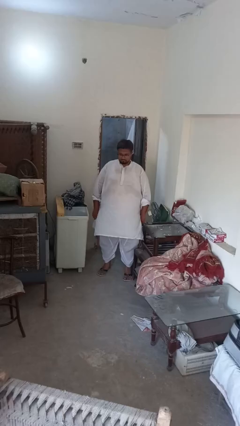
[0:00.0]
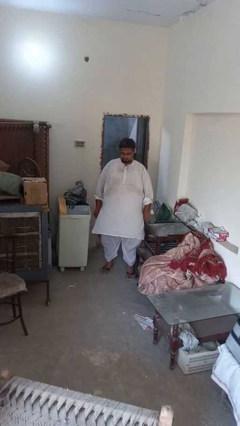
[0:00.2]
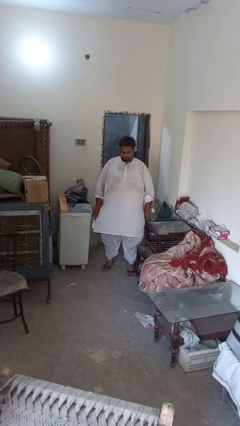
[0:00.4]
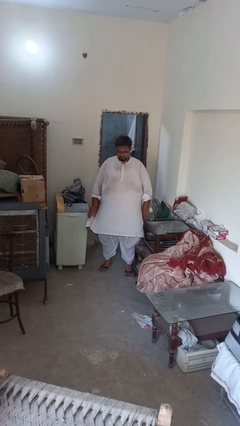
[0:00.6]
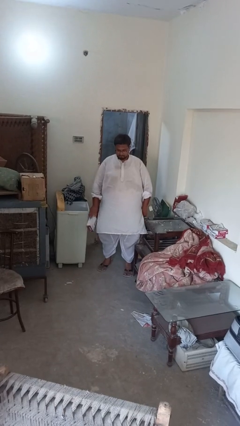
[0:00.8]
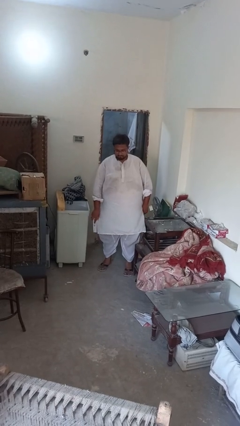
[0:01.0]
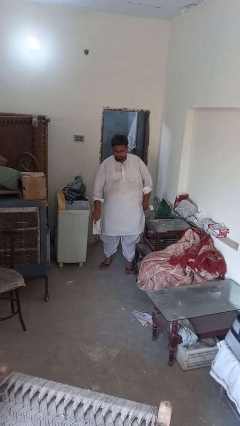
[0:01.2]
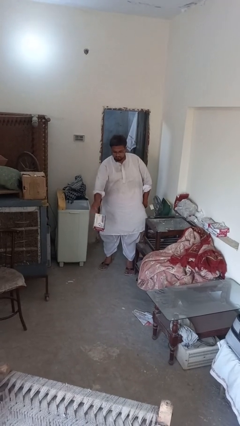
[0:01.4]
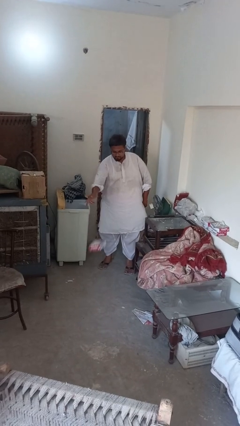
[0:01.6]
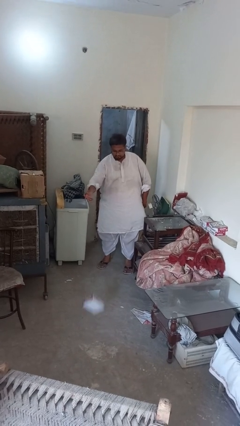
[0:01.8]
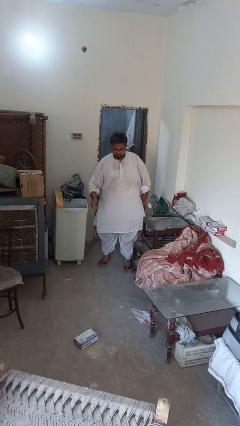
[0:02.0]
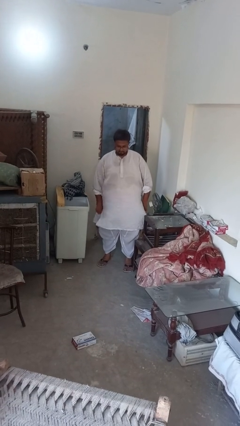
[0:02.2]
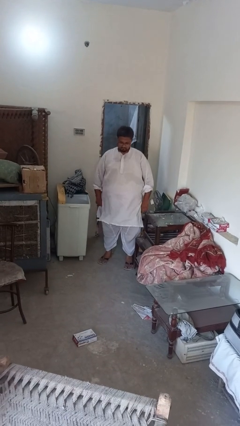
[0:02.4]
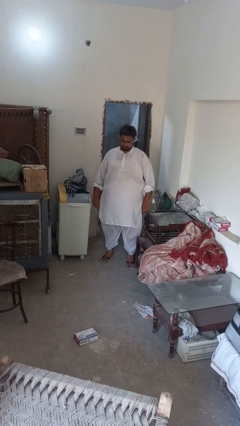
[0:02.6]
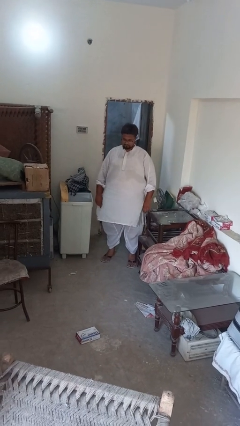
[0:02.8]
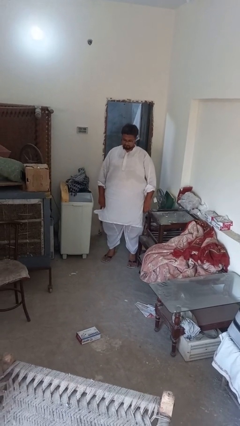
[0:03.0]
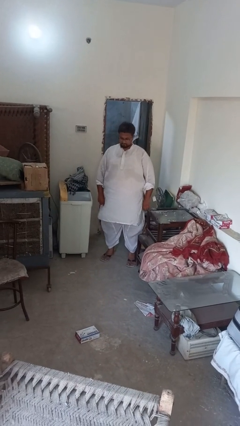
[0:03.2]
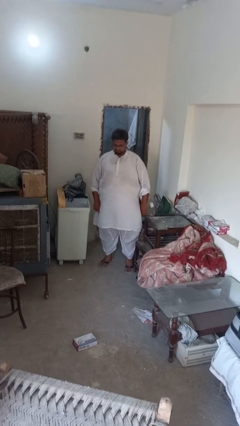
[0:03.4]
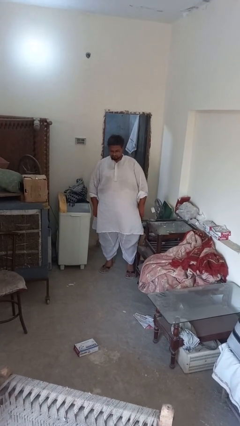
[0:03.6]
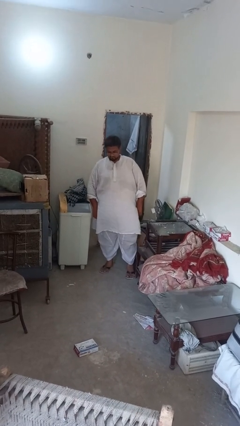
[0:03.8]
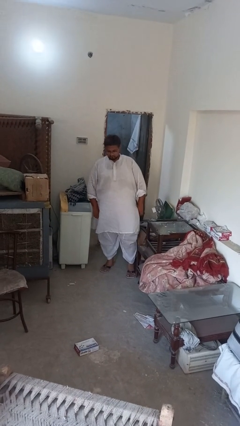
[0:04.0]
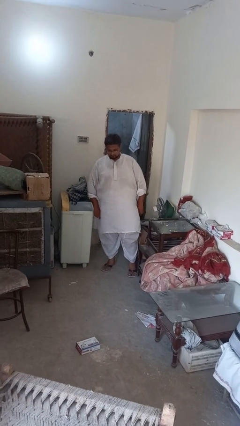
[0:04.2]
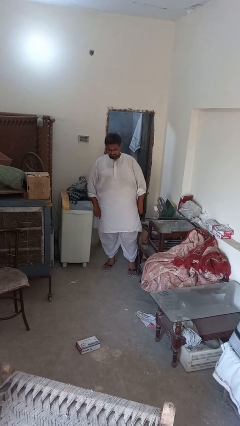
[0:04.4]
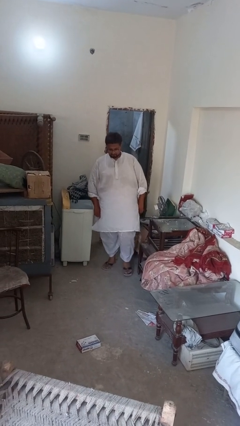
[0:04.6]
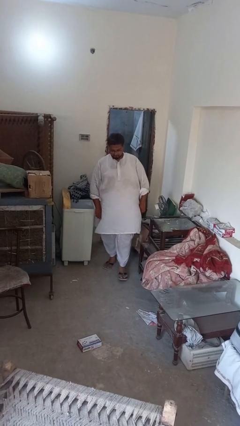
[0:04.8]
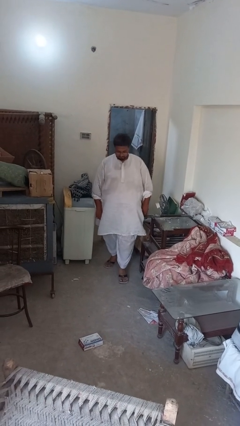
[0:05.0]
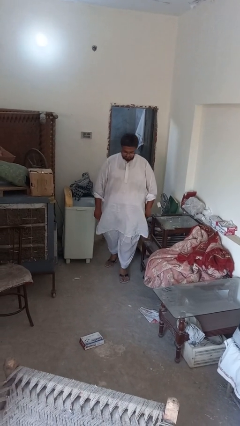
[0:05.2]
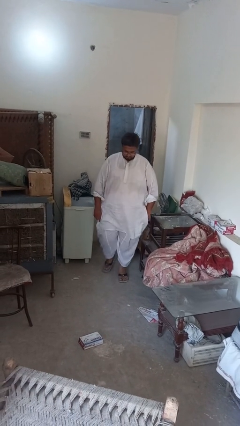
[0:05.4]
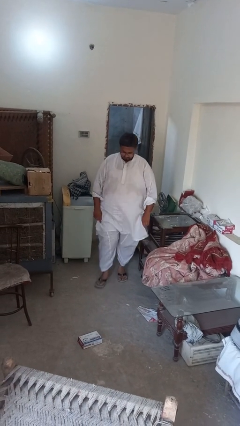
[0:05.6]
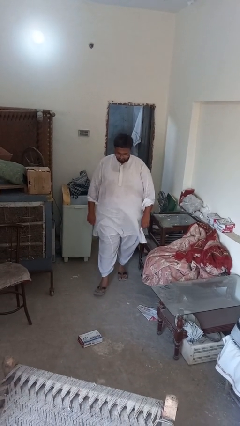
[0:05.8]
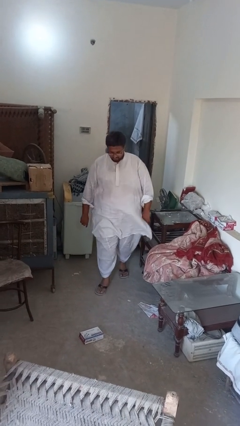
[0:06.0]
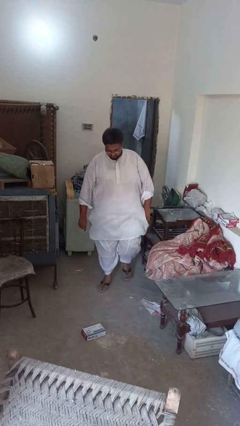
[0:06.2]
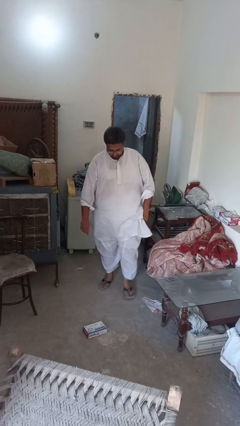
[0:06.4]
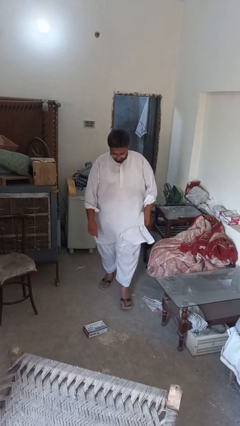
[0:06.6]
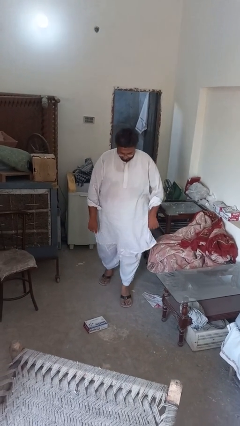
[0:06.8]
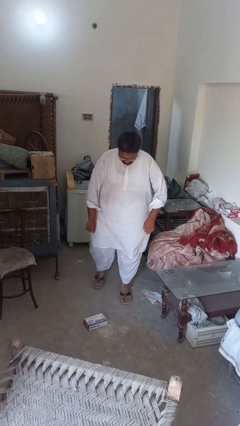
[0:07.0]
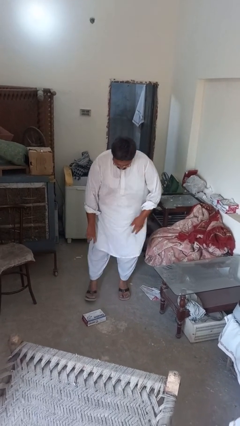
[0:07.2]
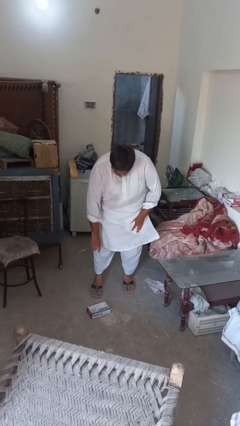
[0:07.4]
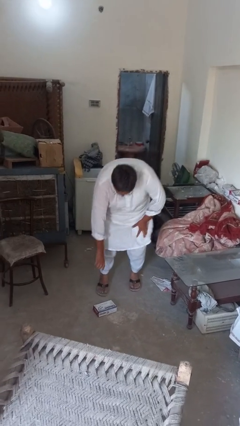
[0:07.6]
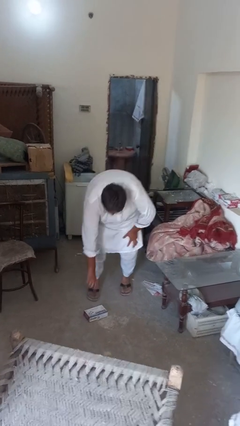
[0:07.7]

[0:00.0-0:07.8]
person throws object to ground

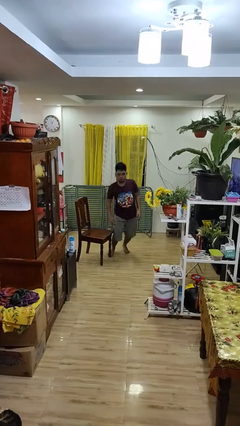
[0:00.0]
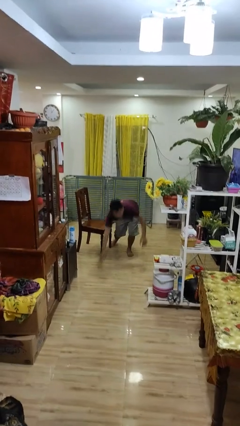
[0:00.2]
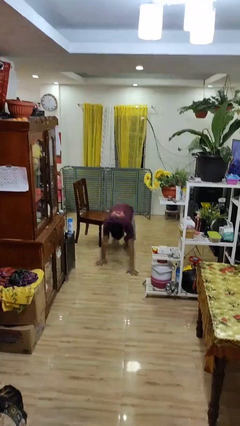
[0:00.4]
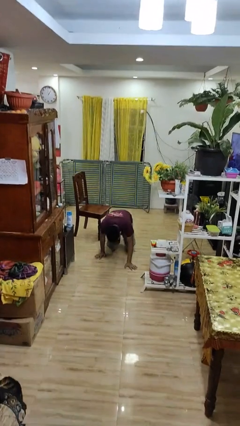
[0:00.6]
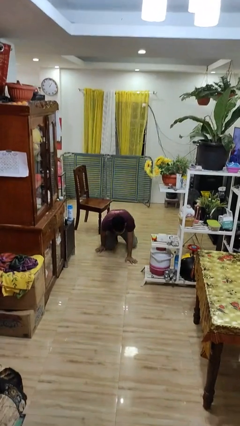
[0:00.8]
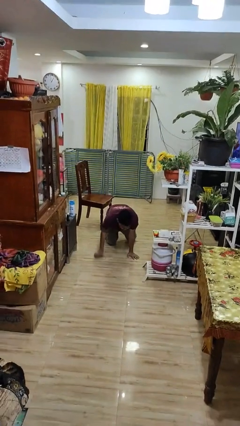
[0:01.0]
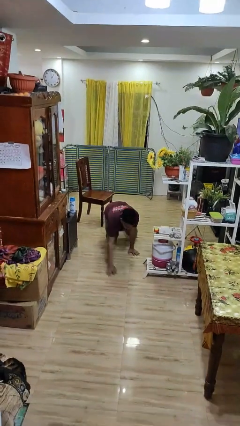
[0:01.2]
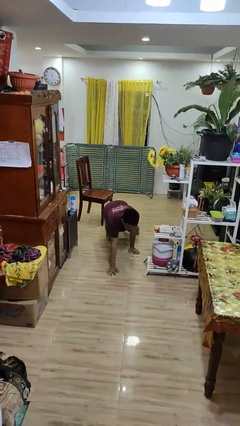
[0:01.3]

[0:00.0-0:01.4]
person trips on object on floor

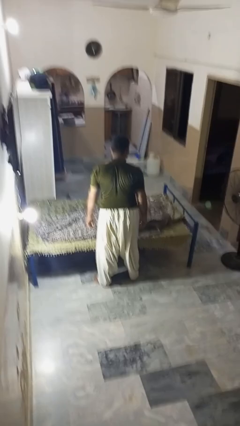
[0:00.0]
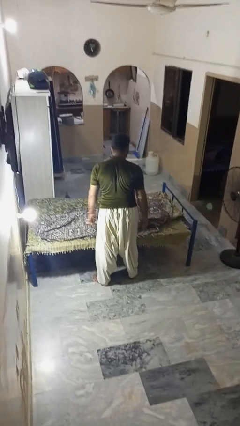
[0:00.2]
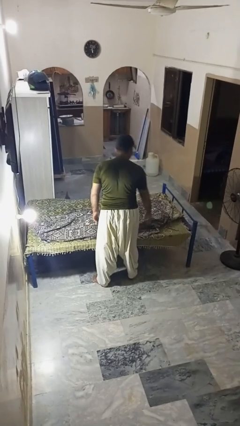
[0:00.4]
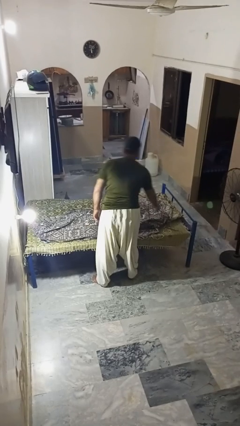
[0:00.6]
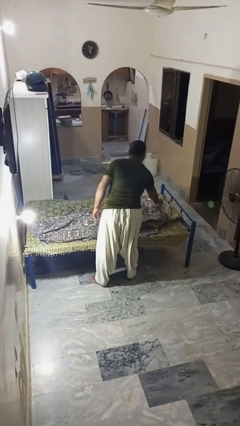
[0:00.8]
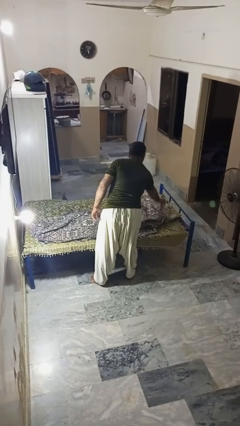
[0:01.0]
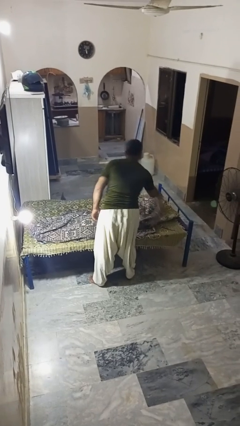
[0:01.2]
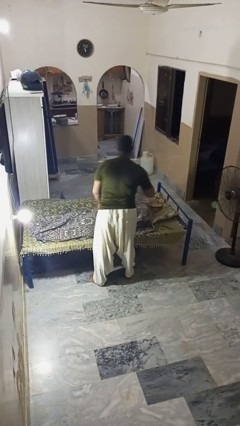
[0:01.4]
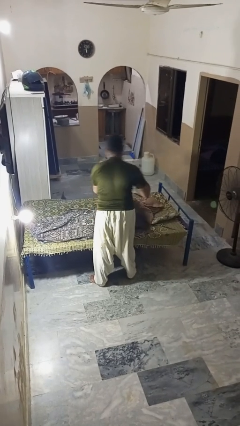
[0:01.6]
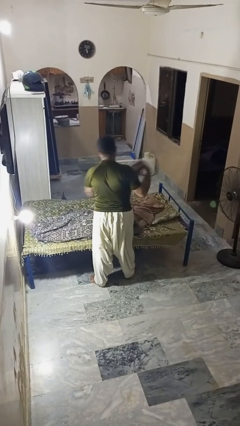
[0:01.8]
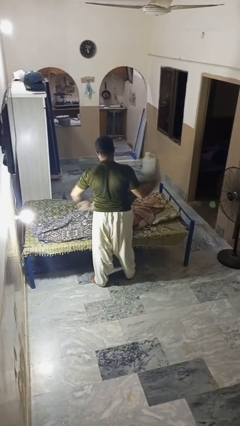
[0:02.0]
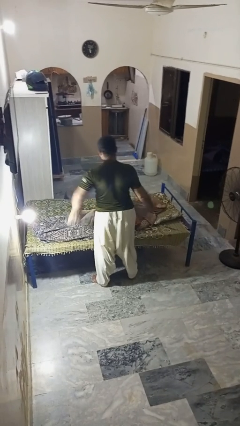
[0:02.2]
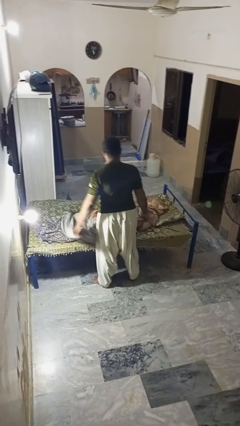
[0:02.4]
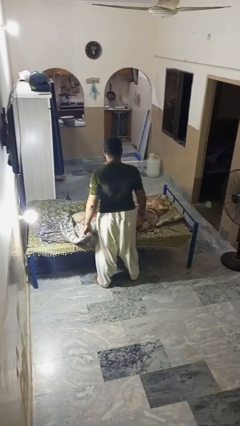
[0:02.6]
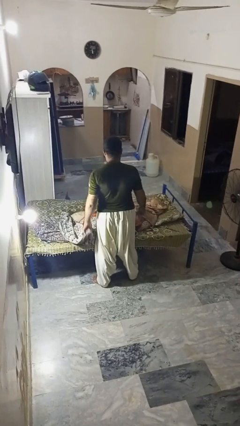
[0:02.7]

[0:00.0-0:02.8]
person uncovers friend with blanket

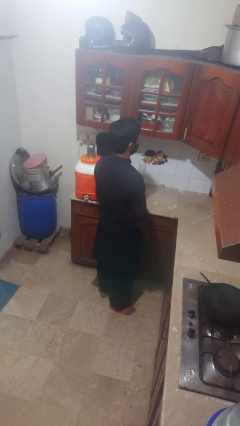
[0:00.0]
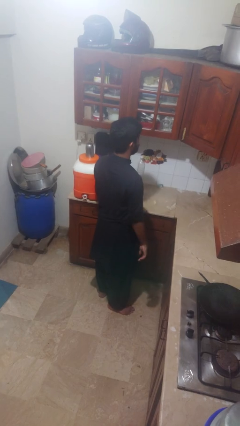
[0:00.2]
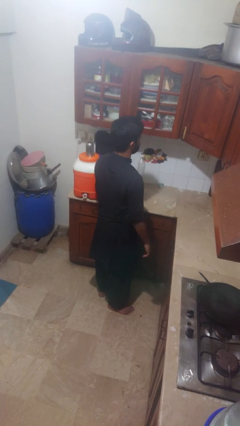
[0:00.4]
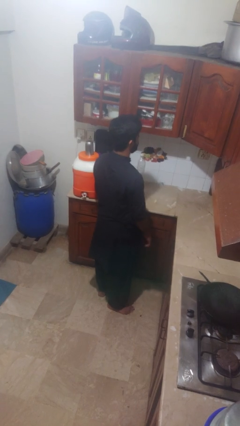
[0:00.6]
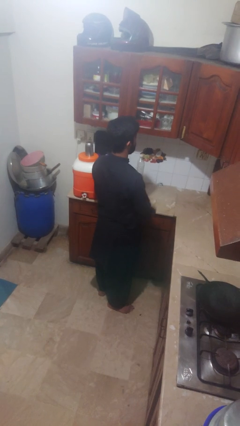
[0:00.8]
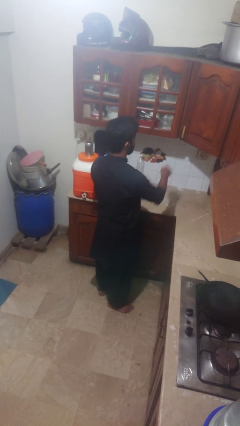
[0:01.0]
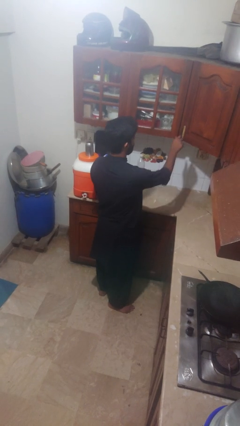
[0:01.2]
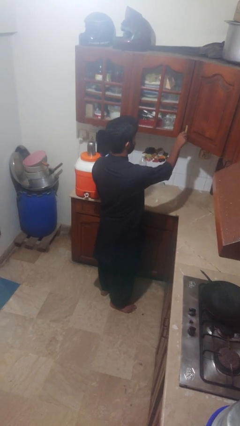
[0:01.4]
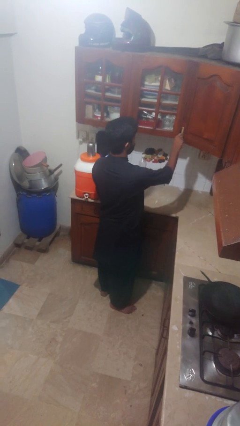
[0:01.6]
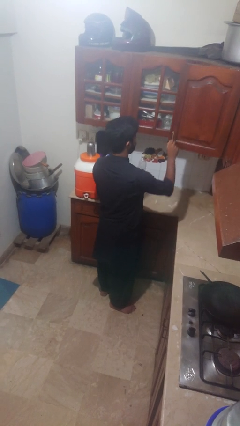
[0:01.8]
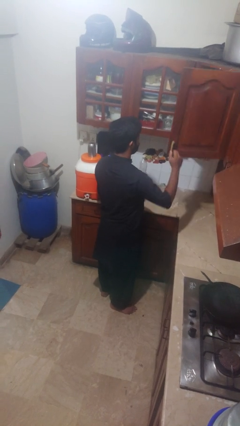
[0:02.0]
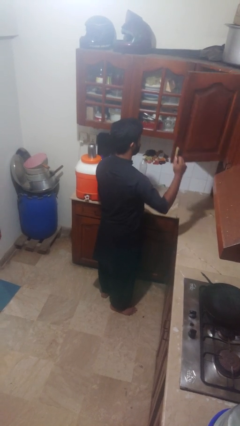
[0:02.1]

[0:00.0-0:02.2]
person opens cabinet

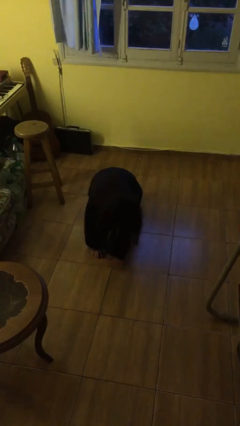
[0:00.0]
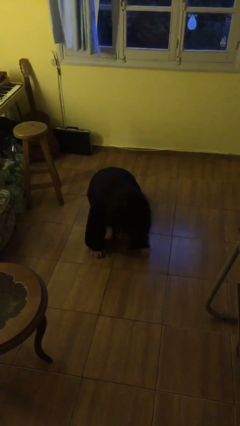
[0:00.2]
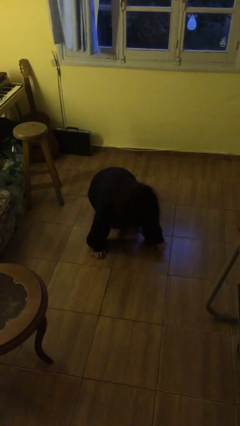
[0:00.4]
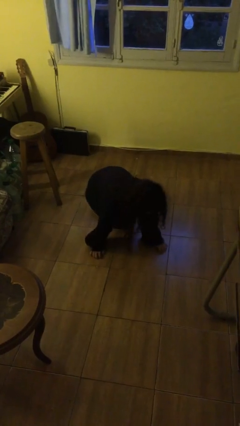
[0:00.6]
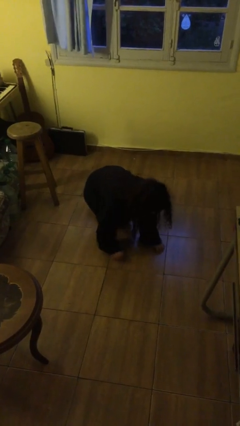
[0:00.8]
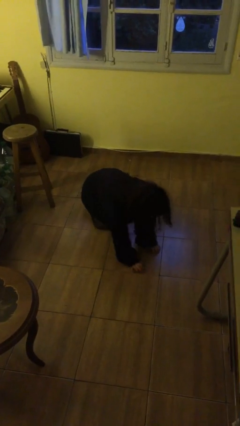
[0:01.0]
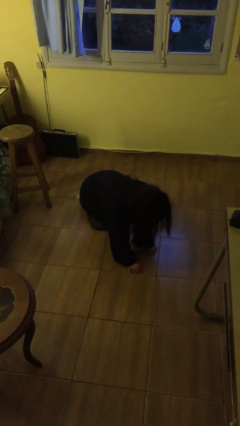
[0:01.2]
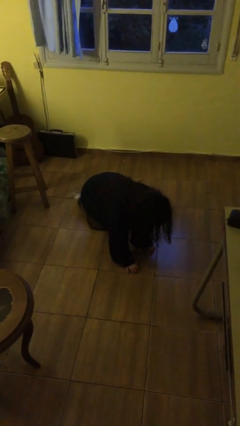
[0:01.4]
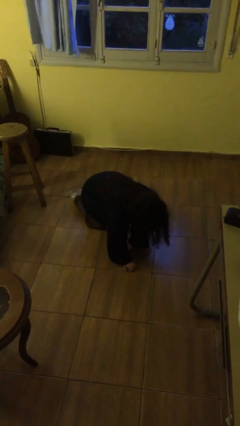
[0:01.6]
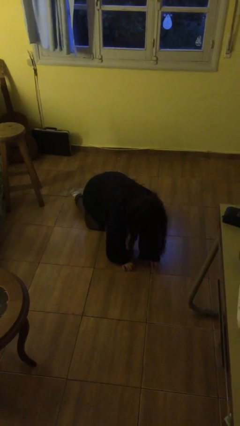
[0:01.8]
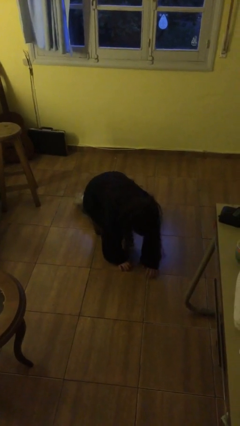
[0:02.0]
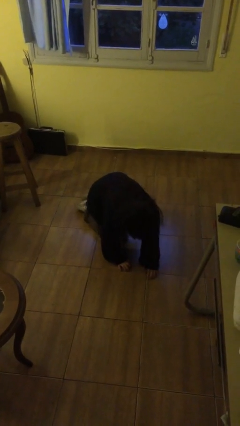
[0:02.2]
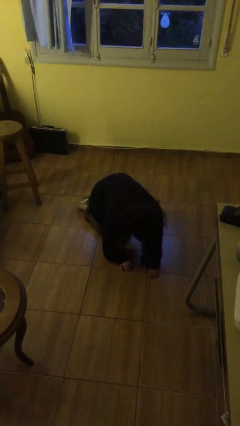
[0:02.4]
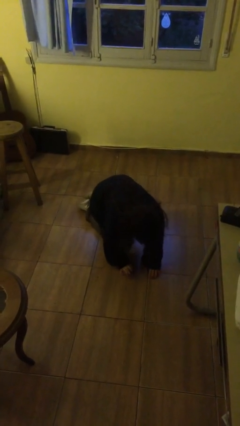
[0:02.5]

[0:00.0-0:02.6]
person crawls

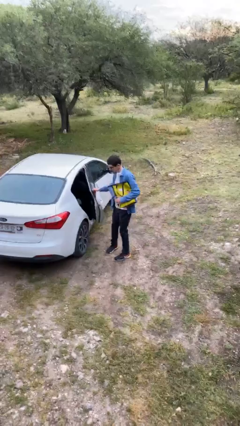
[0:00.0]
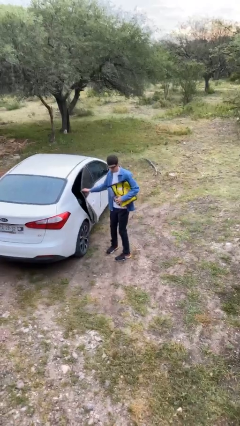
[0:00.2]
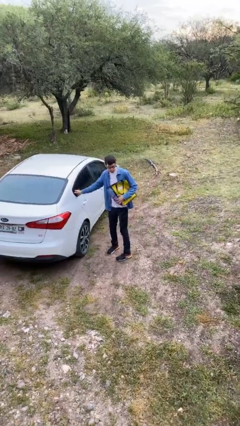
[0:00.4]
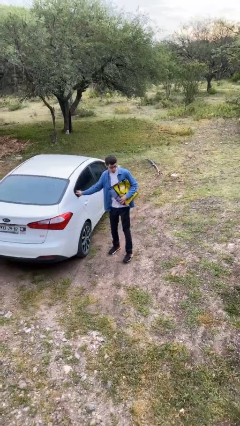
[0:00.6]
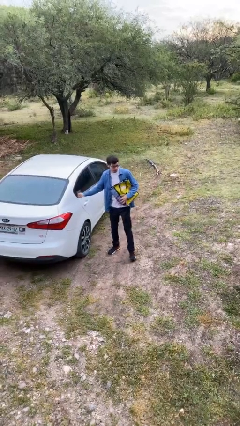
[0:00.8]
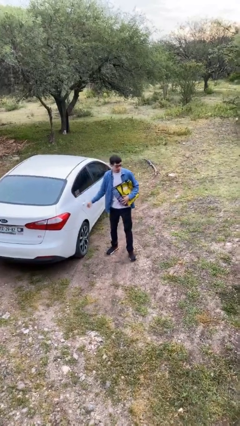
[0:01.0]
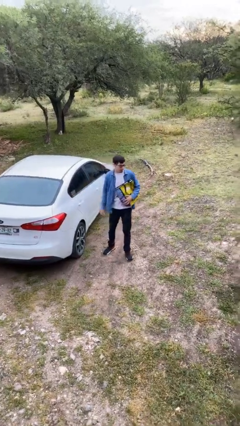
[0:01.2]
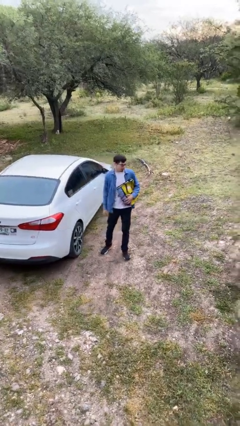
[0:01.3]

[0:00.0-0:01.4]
person closes car door
